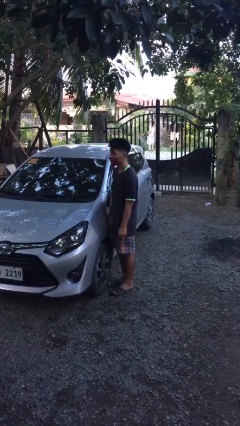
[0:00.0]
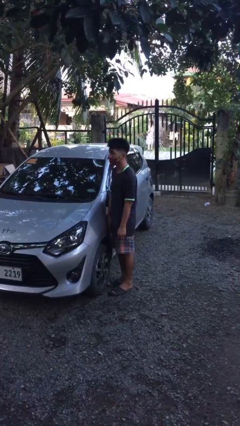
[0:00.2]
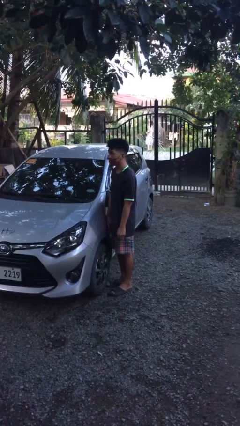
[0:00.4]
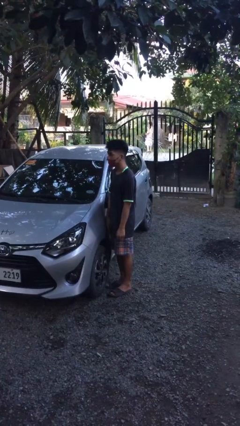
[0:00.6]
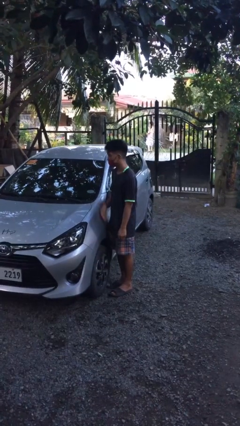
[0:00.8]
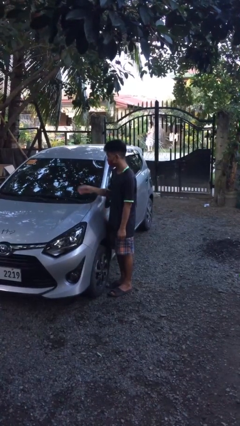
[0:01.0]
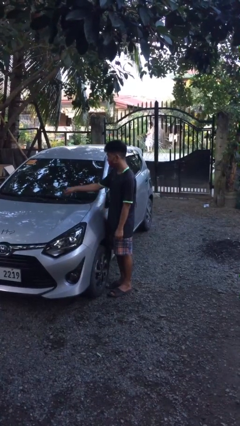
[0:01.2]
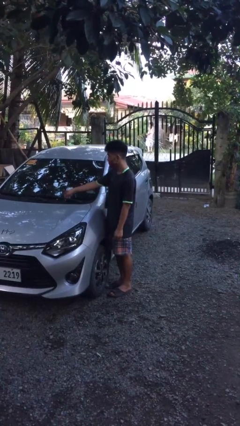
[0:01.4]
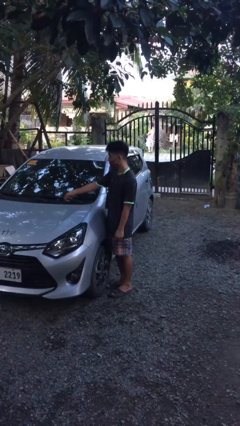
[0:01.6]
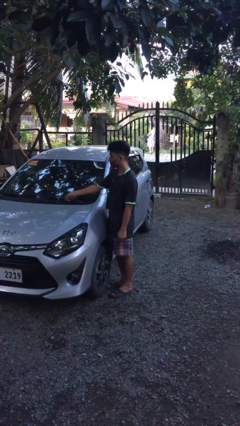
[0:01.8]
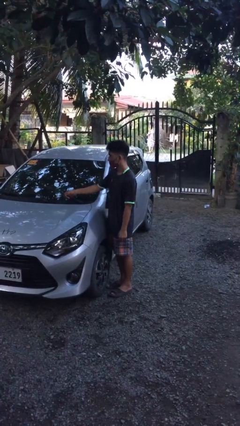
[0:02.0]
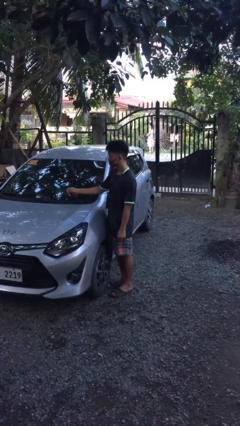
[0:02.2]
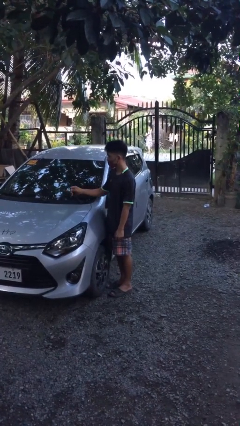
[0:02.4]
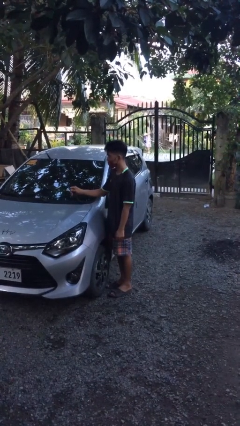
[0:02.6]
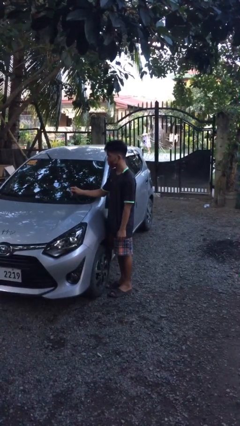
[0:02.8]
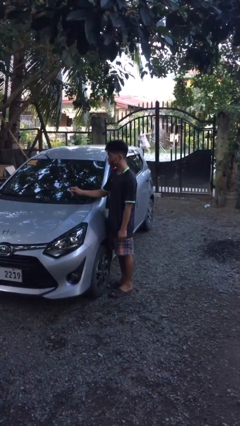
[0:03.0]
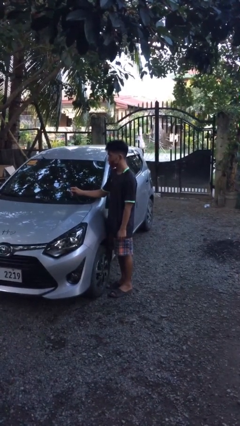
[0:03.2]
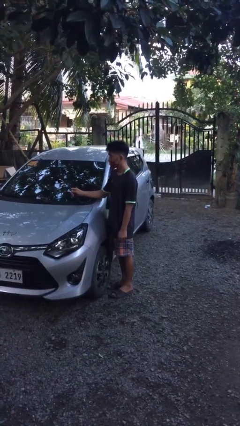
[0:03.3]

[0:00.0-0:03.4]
person flips up car wipers

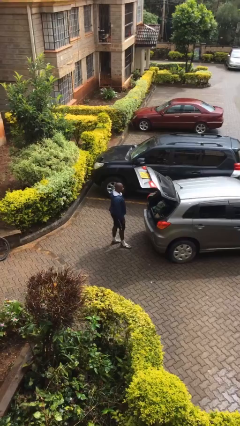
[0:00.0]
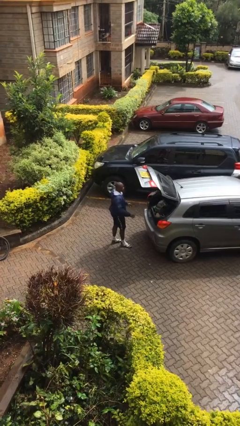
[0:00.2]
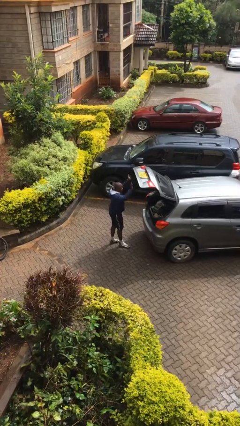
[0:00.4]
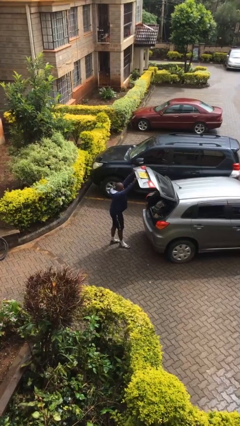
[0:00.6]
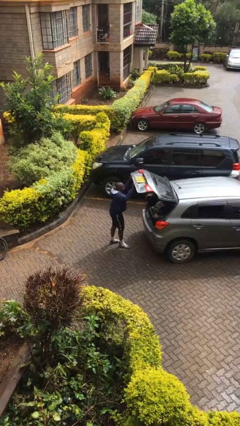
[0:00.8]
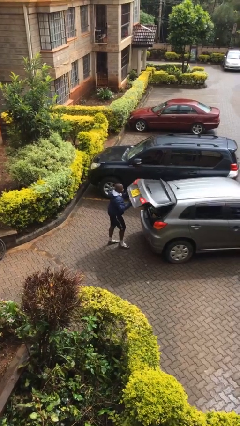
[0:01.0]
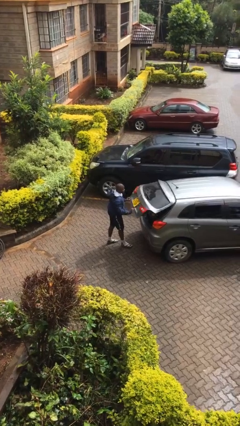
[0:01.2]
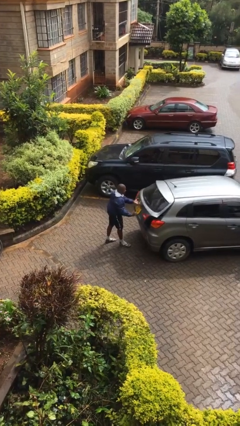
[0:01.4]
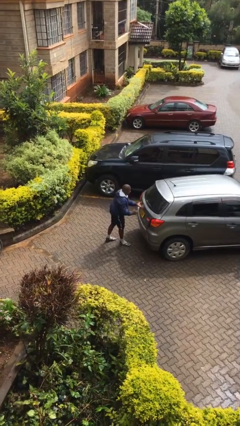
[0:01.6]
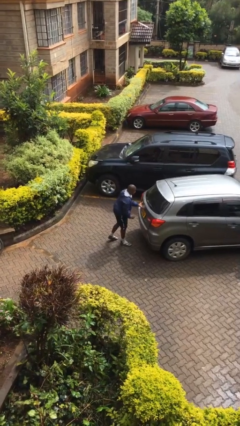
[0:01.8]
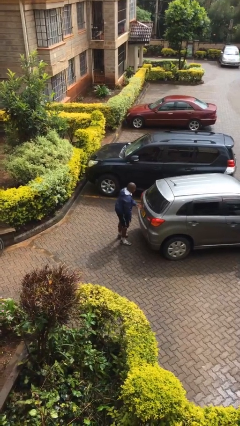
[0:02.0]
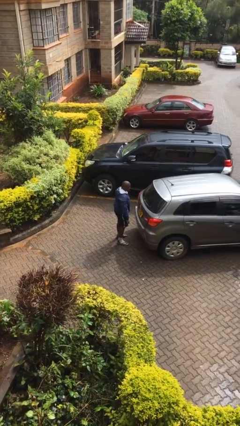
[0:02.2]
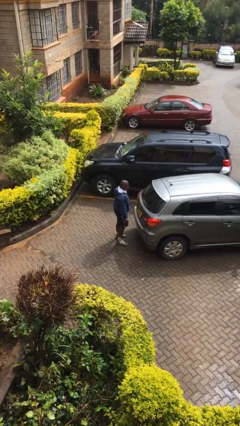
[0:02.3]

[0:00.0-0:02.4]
person closes car trunk

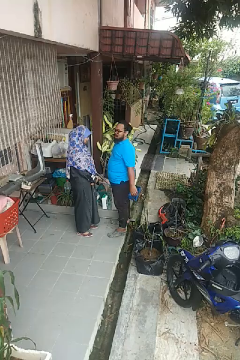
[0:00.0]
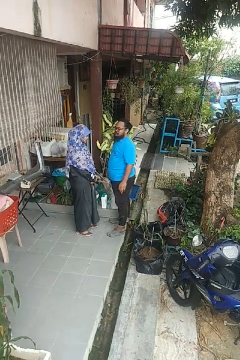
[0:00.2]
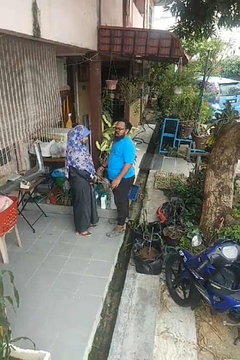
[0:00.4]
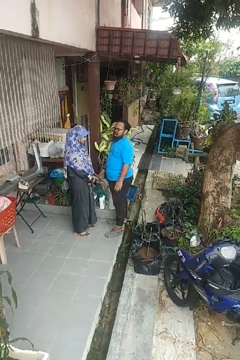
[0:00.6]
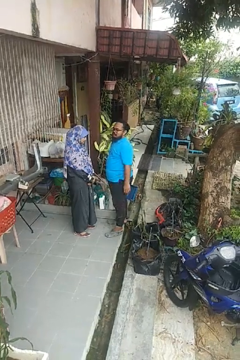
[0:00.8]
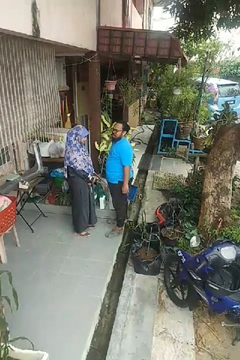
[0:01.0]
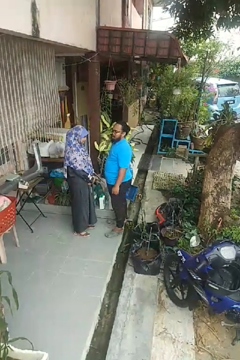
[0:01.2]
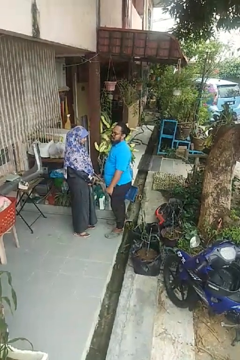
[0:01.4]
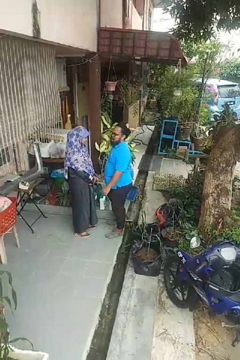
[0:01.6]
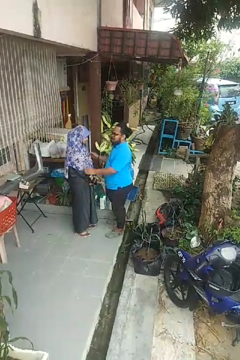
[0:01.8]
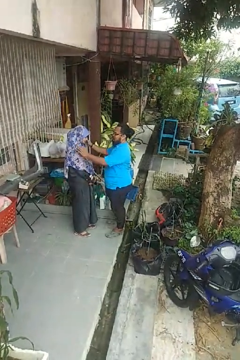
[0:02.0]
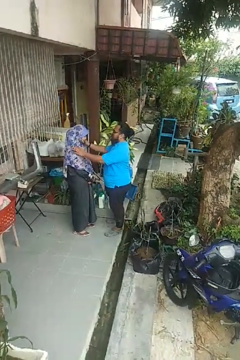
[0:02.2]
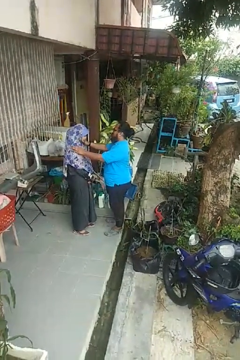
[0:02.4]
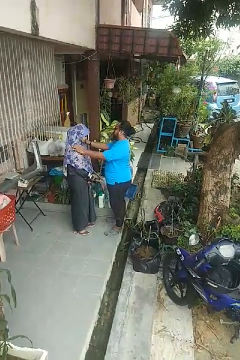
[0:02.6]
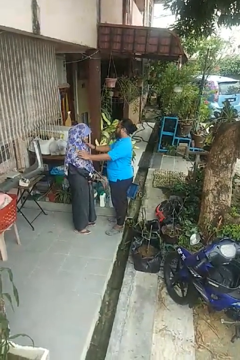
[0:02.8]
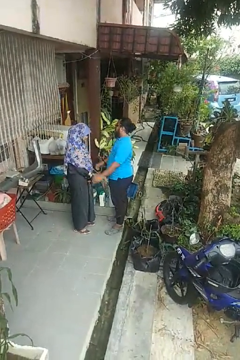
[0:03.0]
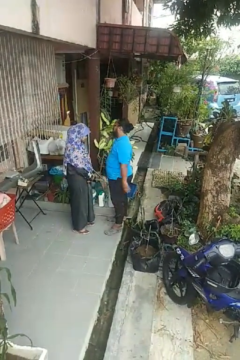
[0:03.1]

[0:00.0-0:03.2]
person pounds shoulders of person

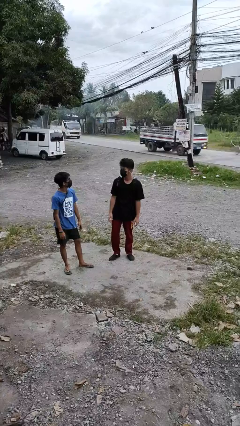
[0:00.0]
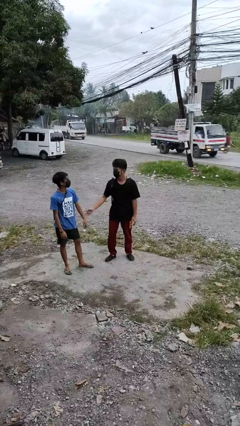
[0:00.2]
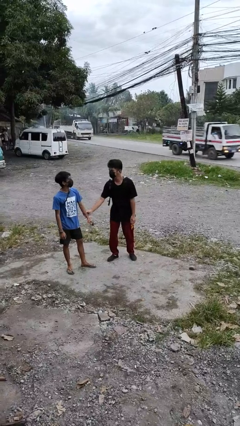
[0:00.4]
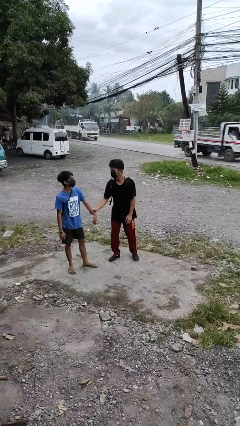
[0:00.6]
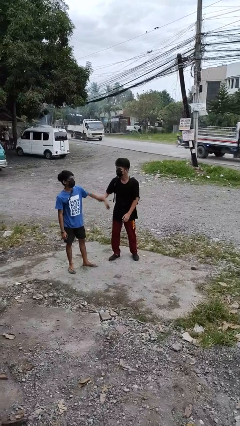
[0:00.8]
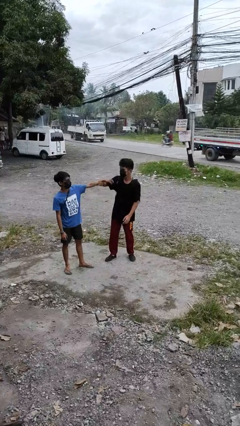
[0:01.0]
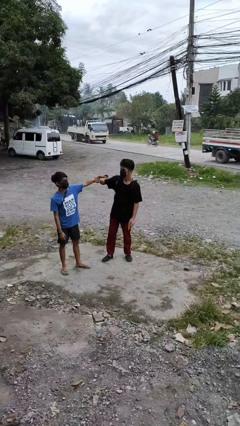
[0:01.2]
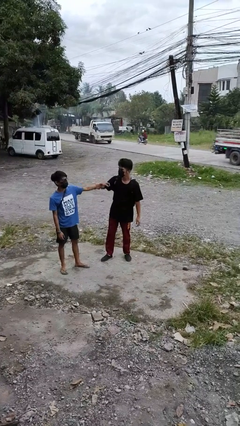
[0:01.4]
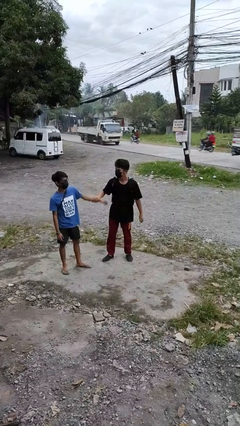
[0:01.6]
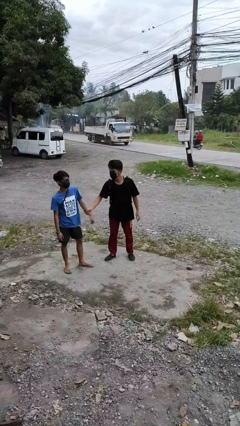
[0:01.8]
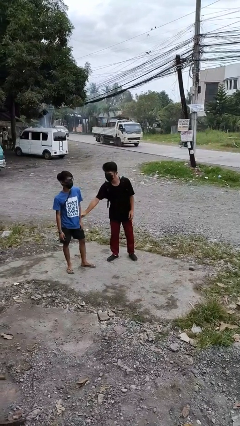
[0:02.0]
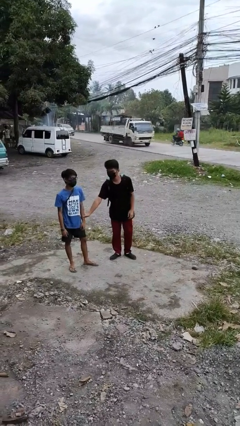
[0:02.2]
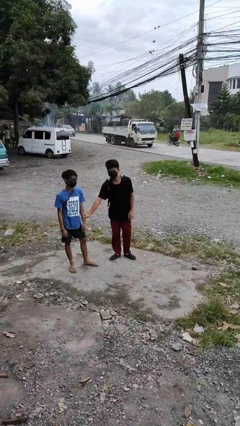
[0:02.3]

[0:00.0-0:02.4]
person grabs person by forearm

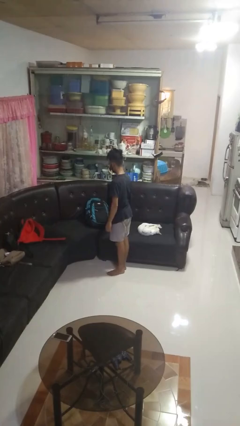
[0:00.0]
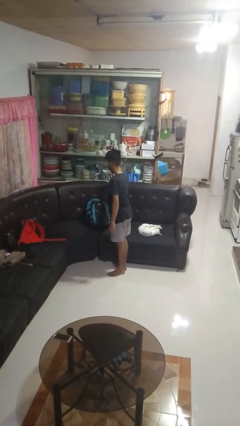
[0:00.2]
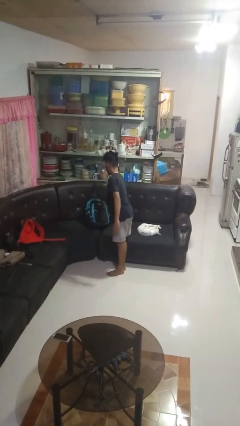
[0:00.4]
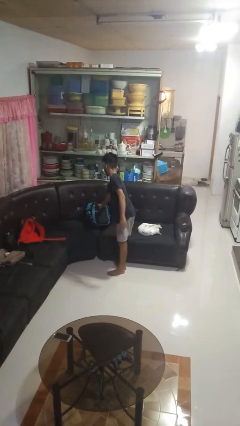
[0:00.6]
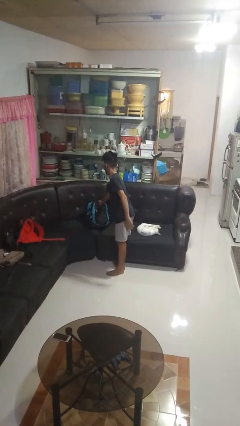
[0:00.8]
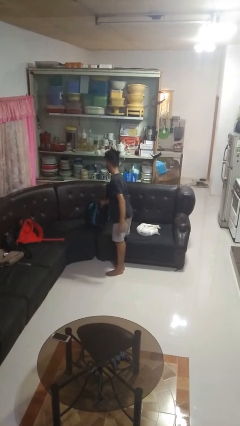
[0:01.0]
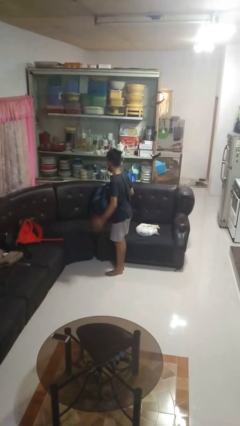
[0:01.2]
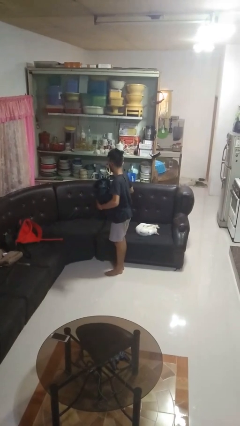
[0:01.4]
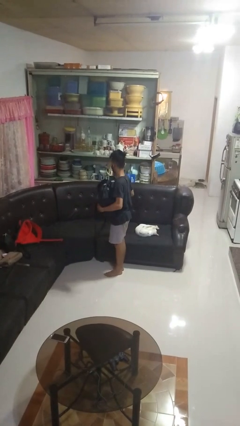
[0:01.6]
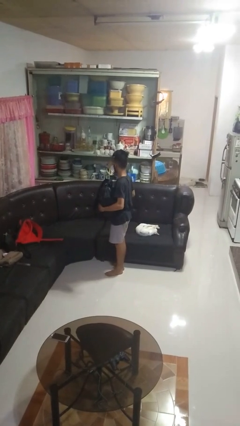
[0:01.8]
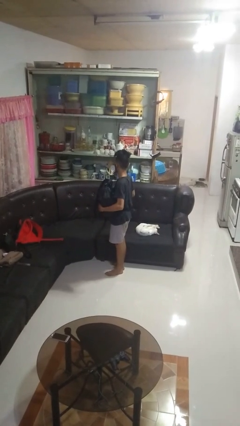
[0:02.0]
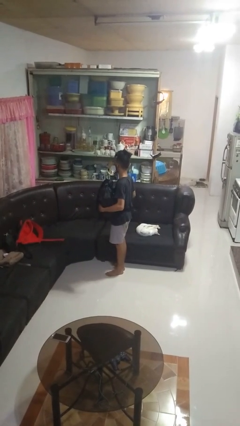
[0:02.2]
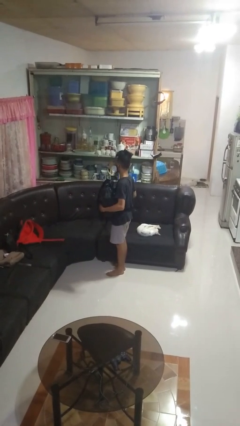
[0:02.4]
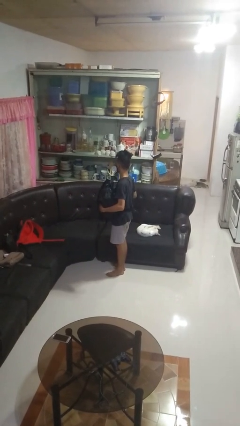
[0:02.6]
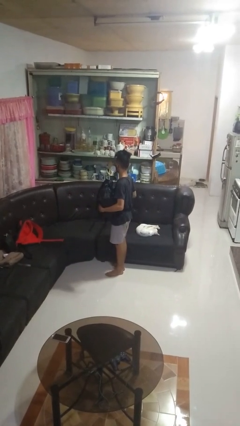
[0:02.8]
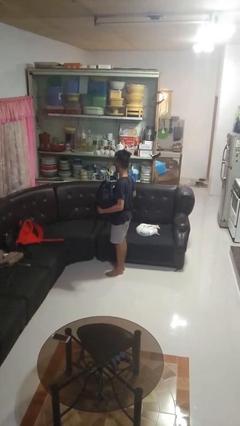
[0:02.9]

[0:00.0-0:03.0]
person picks up object from couch

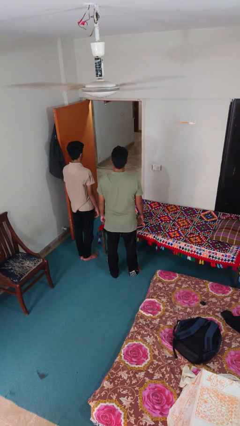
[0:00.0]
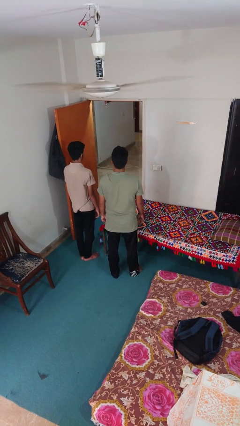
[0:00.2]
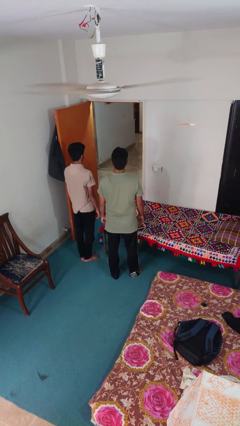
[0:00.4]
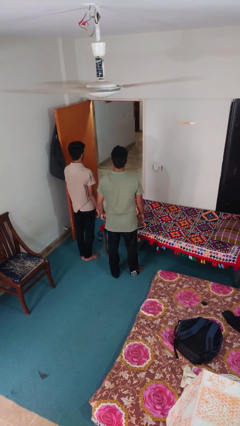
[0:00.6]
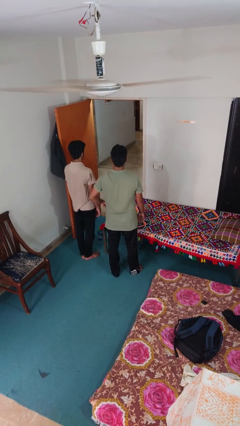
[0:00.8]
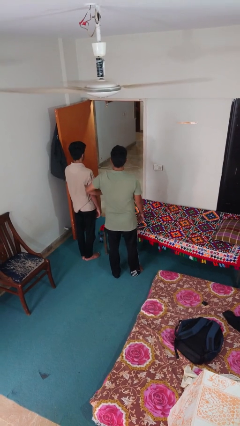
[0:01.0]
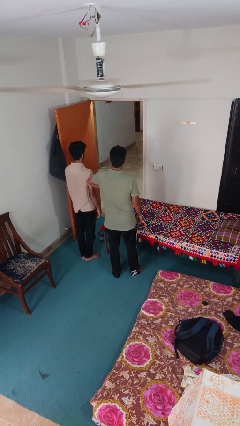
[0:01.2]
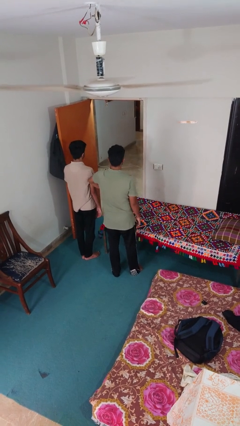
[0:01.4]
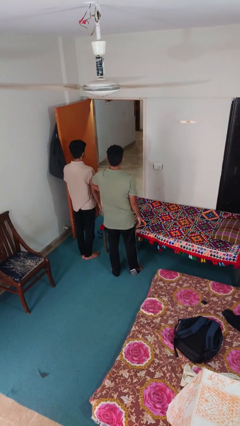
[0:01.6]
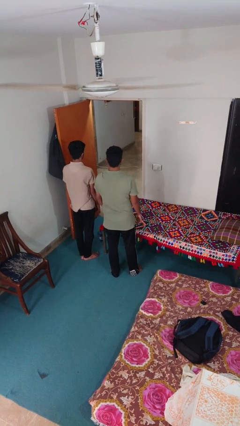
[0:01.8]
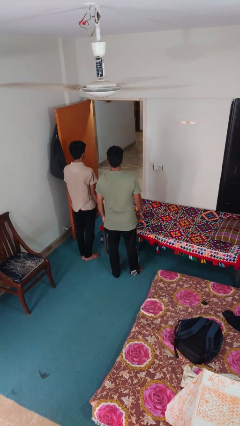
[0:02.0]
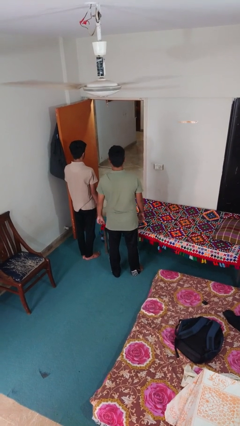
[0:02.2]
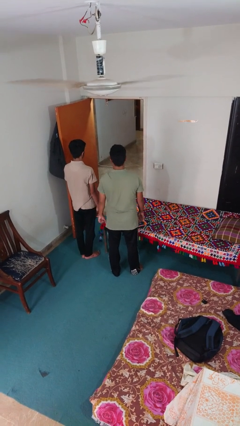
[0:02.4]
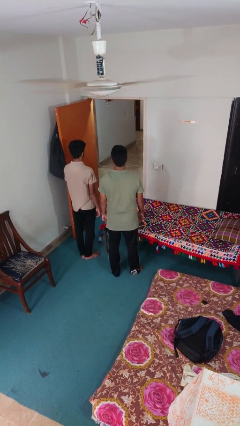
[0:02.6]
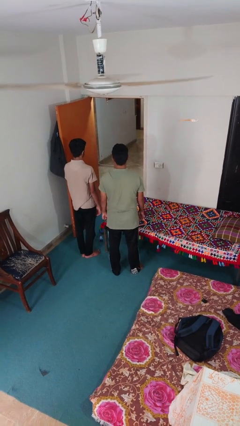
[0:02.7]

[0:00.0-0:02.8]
person nudges person with elbow

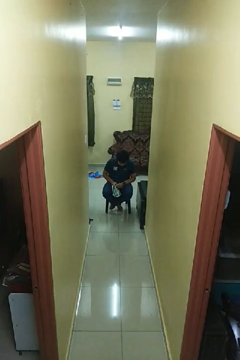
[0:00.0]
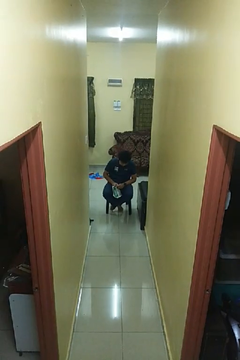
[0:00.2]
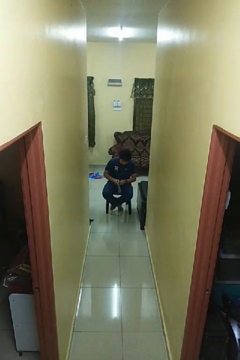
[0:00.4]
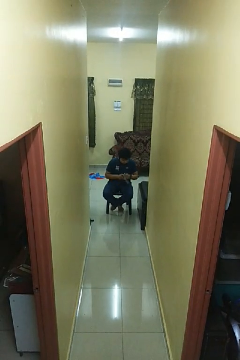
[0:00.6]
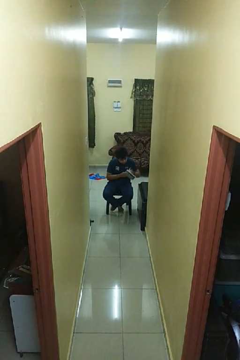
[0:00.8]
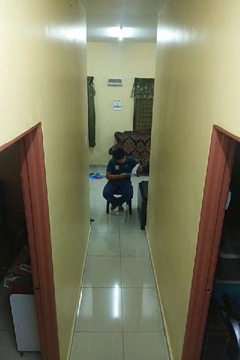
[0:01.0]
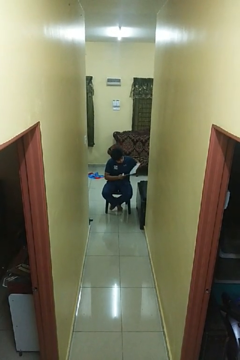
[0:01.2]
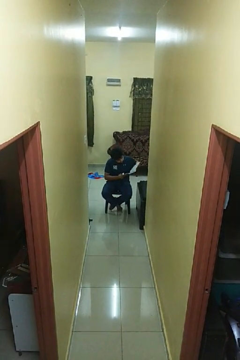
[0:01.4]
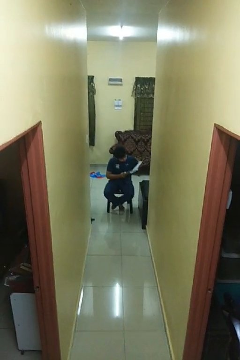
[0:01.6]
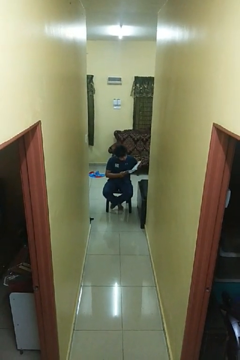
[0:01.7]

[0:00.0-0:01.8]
person reads magazine
